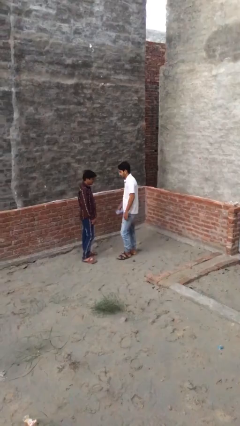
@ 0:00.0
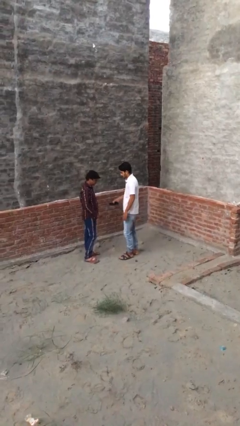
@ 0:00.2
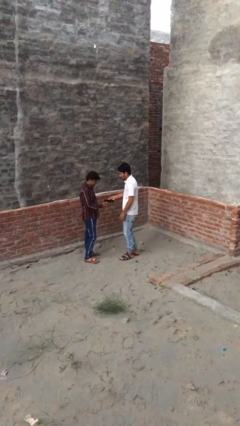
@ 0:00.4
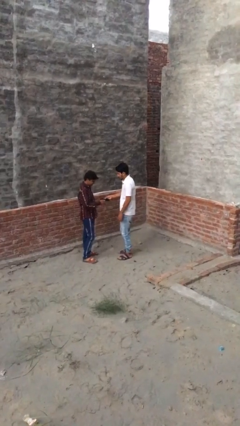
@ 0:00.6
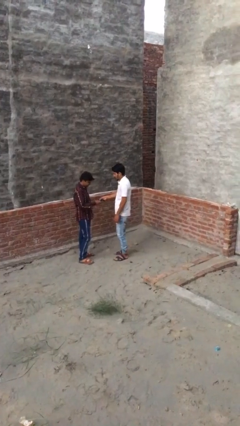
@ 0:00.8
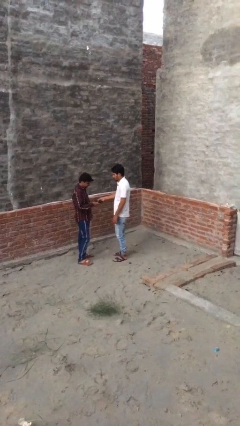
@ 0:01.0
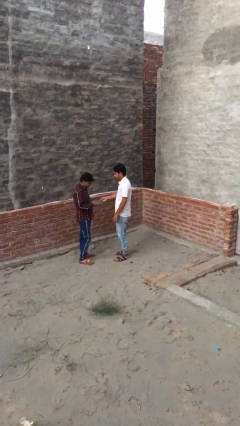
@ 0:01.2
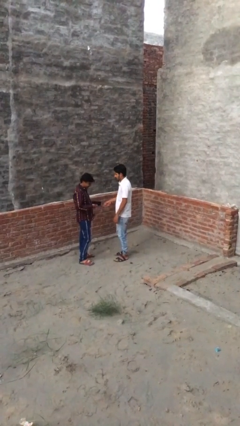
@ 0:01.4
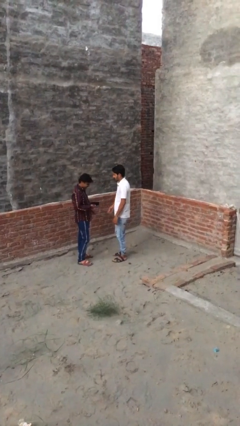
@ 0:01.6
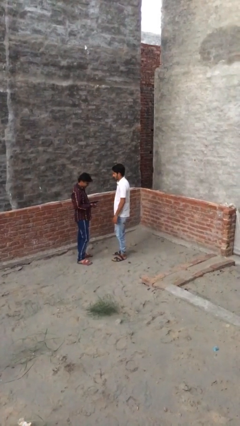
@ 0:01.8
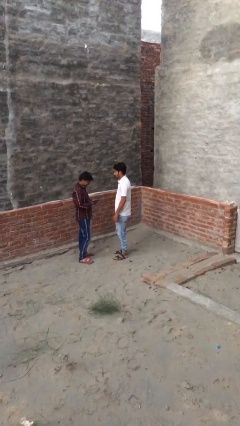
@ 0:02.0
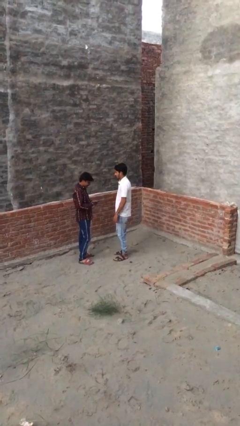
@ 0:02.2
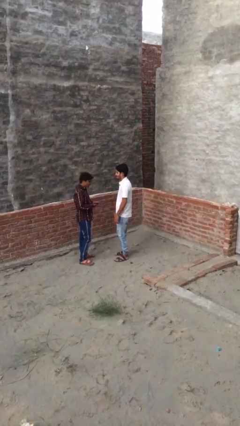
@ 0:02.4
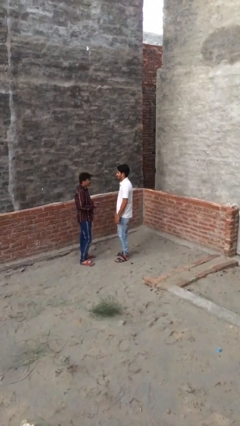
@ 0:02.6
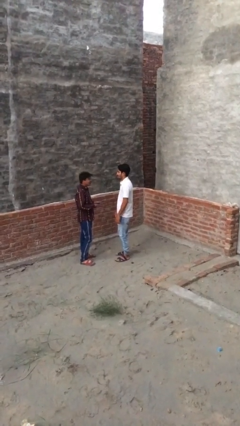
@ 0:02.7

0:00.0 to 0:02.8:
person transfers object to person

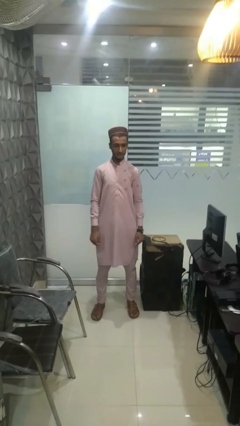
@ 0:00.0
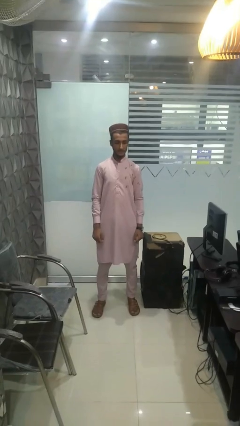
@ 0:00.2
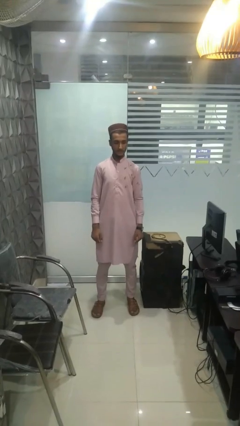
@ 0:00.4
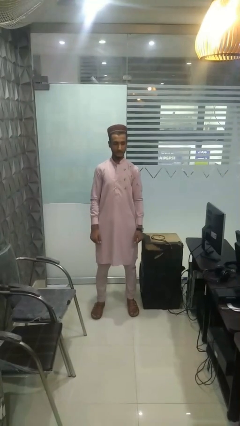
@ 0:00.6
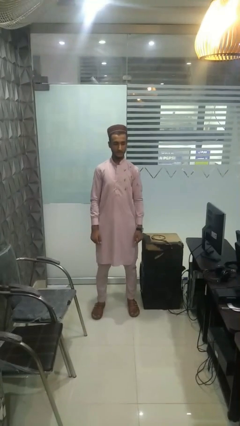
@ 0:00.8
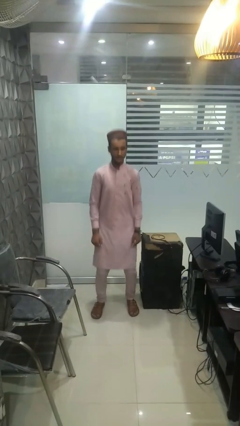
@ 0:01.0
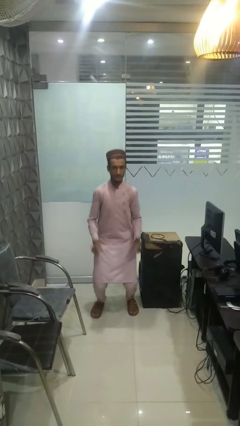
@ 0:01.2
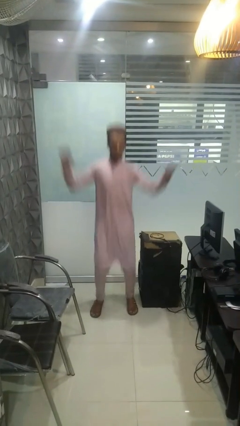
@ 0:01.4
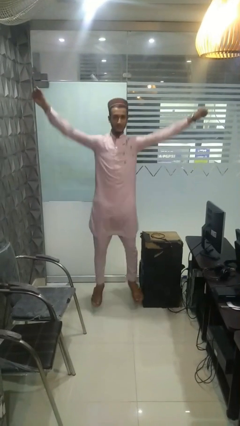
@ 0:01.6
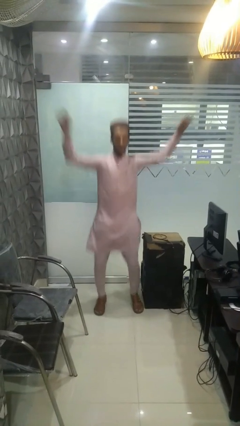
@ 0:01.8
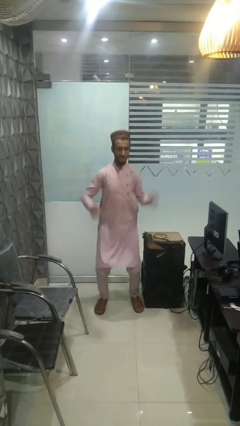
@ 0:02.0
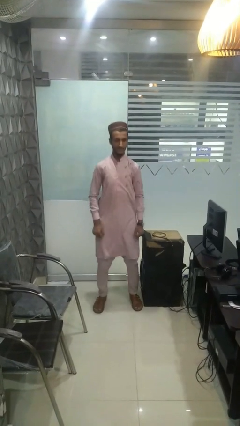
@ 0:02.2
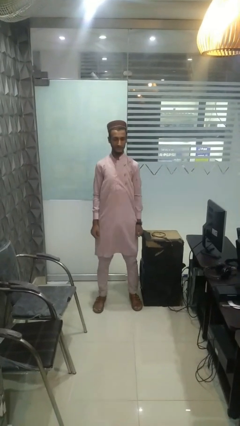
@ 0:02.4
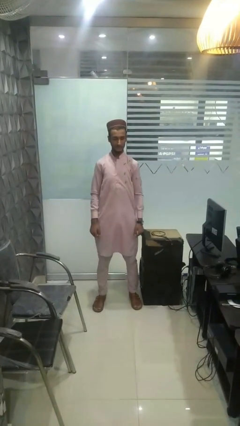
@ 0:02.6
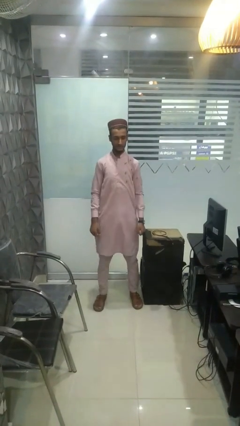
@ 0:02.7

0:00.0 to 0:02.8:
person exercises with jumping jacks

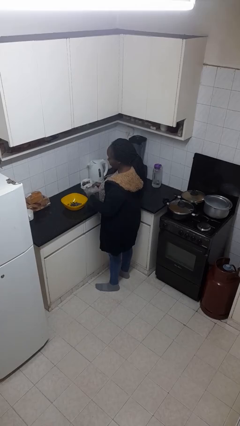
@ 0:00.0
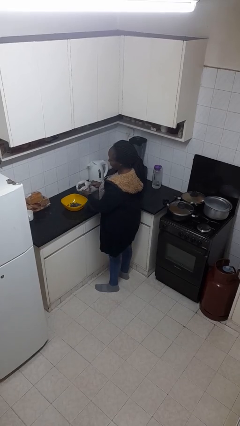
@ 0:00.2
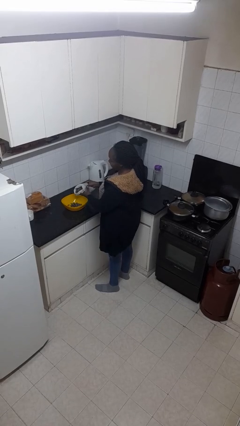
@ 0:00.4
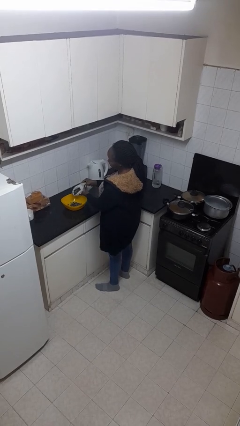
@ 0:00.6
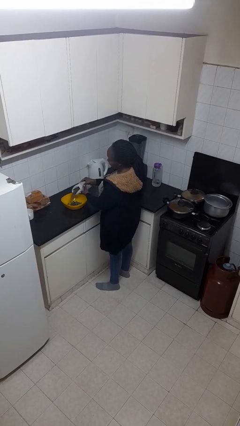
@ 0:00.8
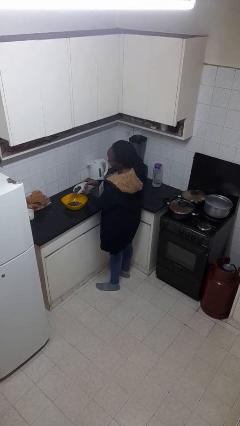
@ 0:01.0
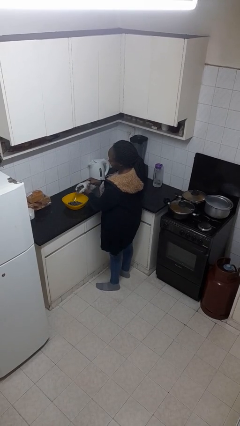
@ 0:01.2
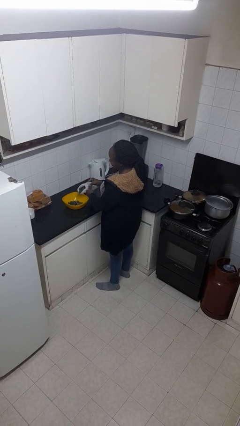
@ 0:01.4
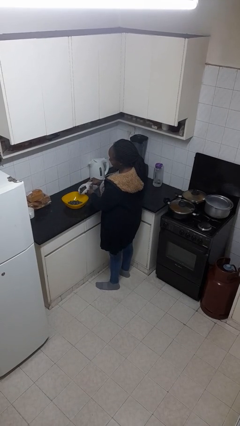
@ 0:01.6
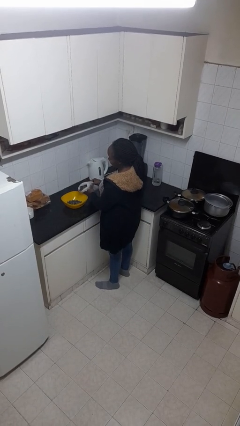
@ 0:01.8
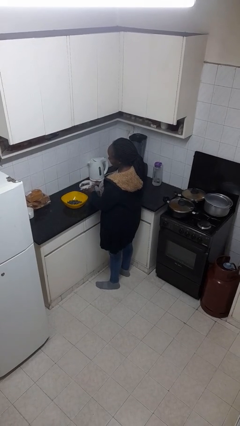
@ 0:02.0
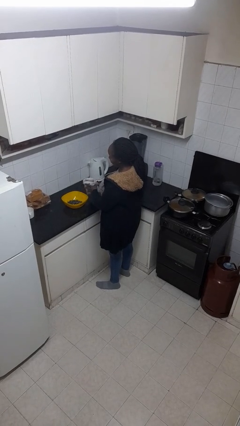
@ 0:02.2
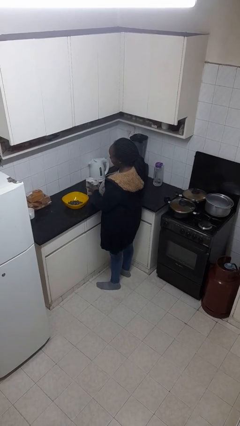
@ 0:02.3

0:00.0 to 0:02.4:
person pours into bowl

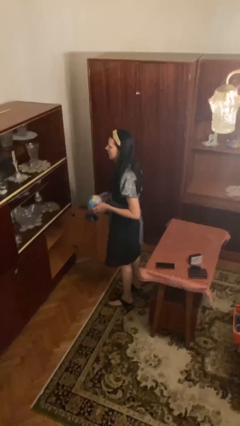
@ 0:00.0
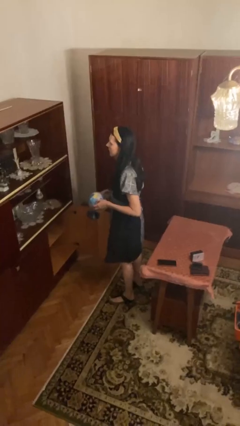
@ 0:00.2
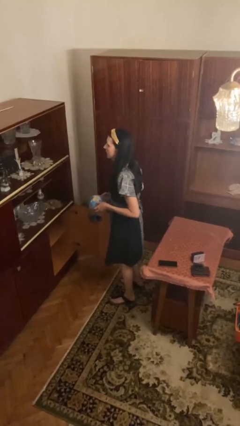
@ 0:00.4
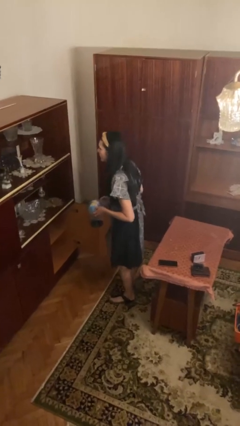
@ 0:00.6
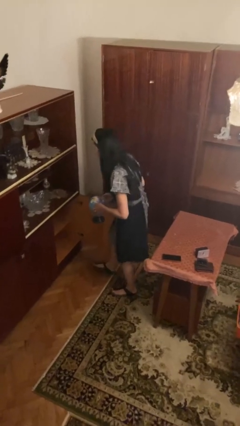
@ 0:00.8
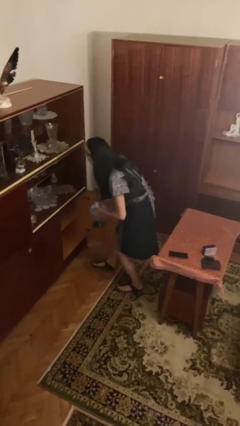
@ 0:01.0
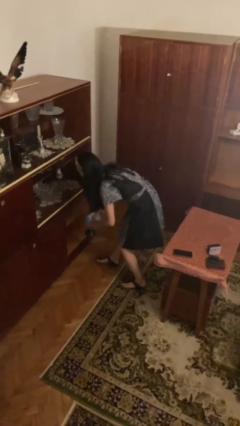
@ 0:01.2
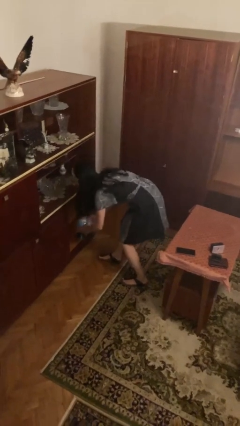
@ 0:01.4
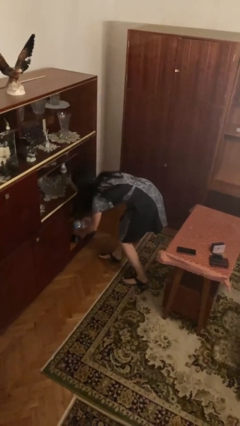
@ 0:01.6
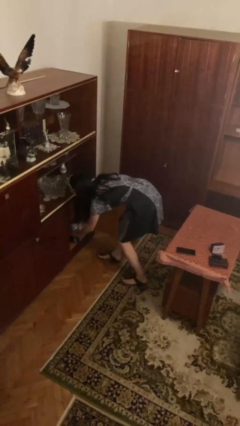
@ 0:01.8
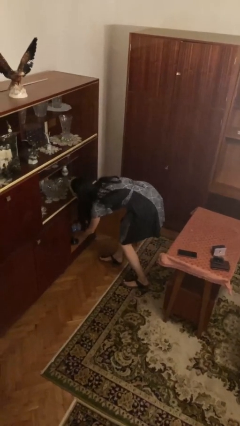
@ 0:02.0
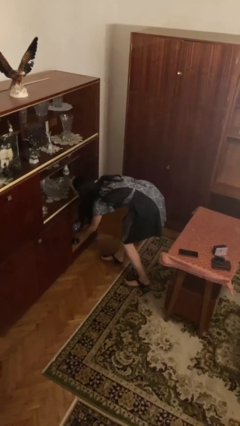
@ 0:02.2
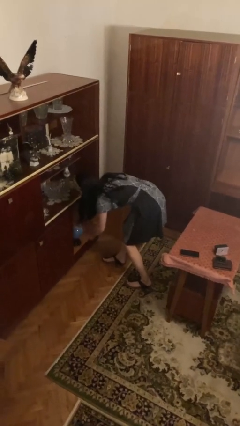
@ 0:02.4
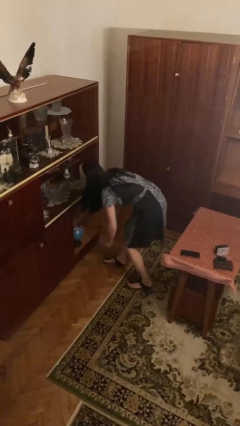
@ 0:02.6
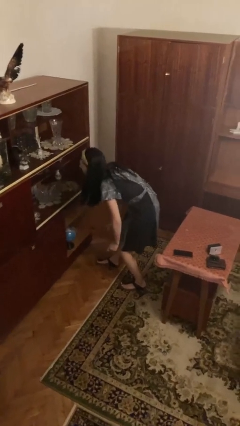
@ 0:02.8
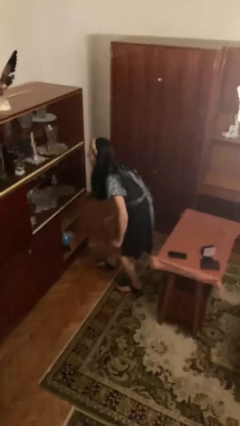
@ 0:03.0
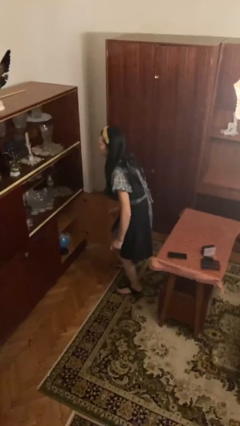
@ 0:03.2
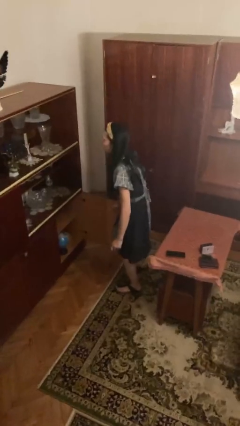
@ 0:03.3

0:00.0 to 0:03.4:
person puts down object into cabinet

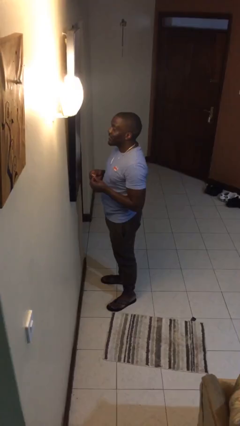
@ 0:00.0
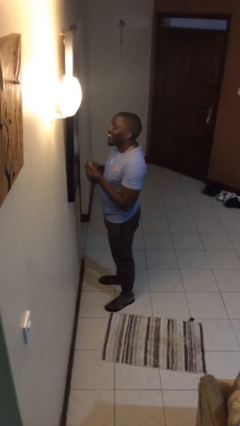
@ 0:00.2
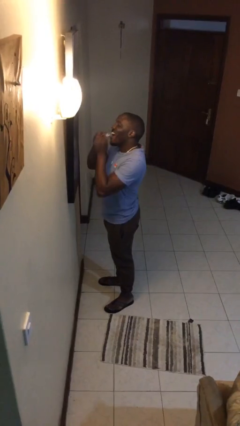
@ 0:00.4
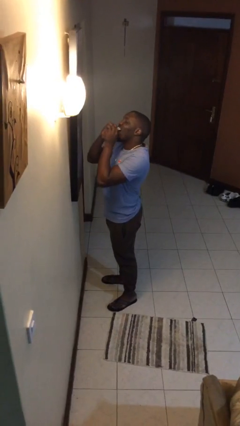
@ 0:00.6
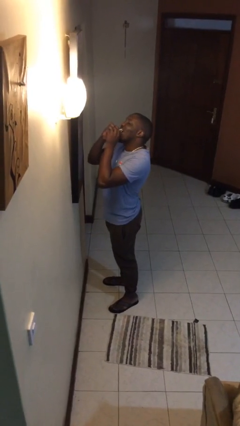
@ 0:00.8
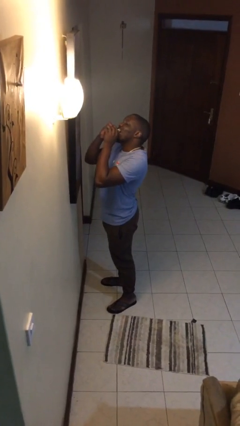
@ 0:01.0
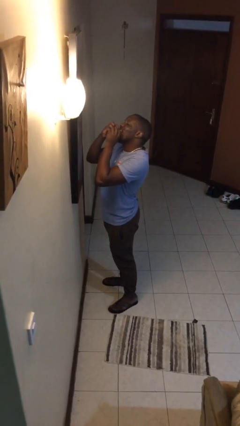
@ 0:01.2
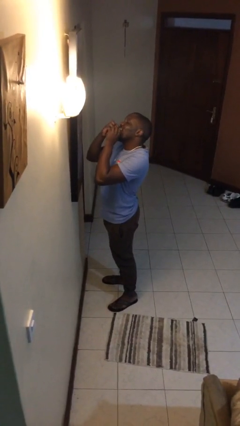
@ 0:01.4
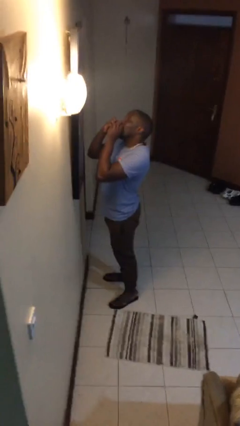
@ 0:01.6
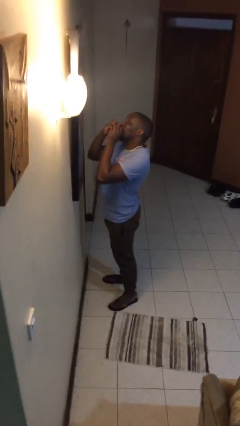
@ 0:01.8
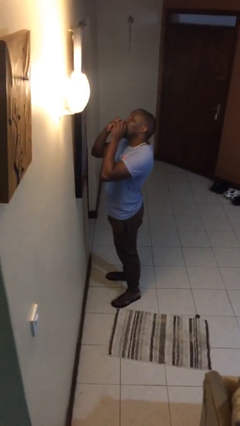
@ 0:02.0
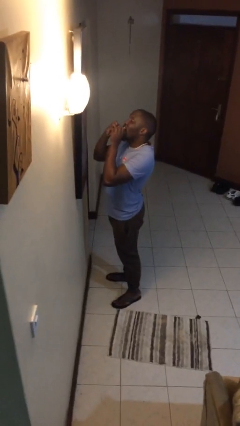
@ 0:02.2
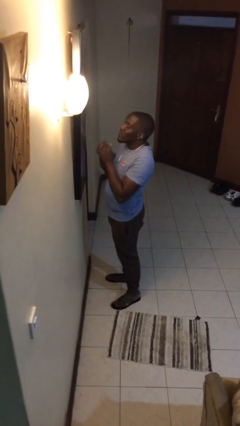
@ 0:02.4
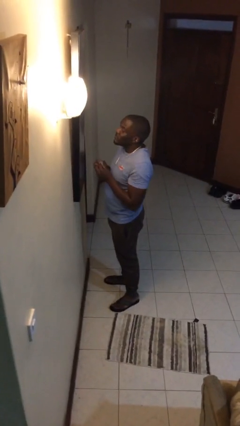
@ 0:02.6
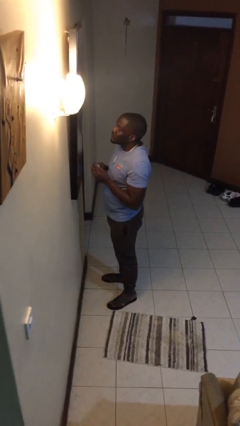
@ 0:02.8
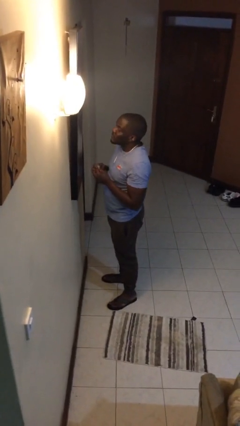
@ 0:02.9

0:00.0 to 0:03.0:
person flosses

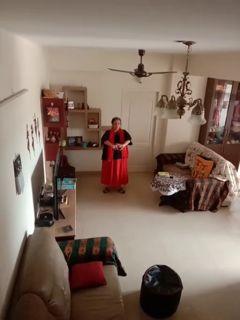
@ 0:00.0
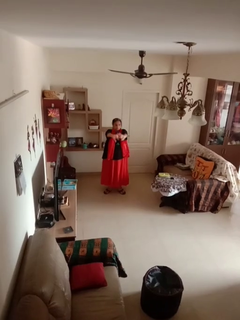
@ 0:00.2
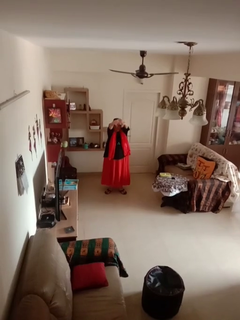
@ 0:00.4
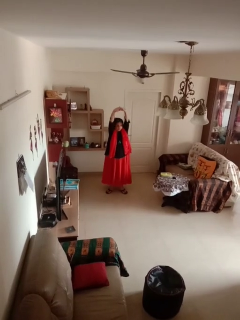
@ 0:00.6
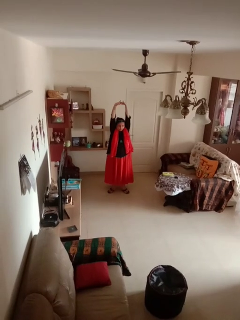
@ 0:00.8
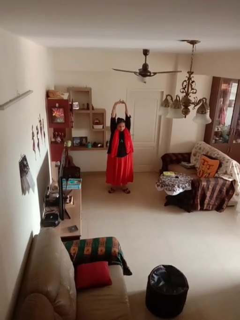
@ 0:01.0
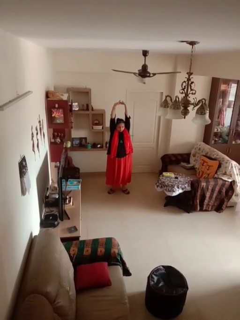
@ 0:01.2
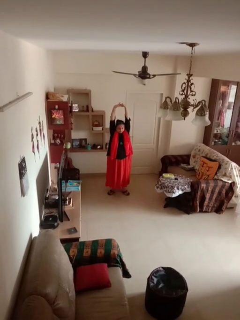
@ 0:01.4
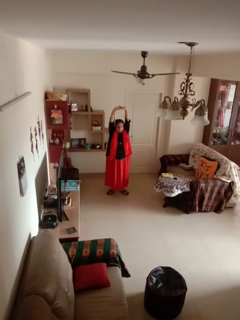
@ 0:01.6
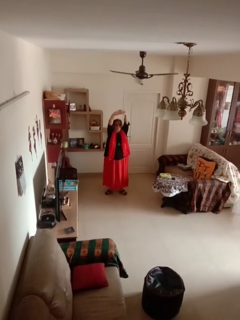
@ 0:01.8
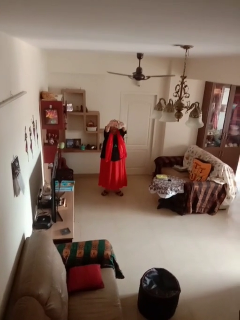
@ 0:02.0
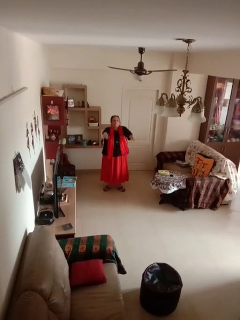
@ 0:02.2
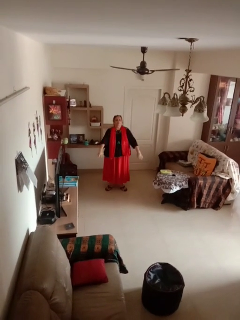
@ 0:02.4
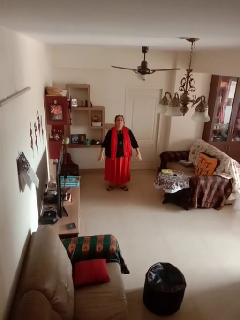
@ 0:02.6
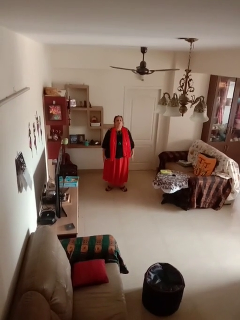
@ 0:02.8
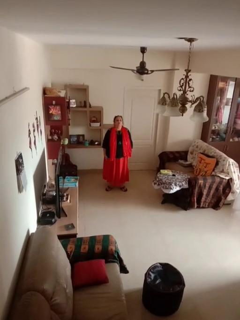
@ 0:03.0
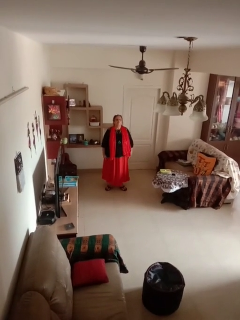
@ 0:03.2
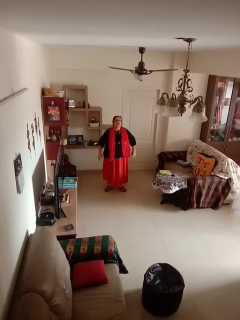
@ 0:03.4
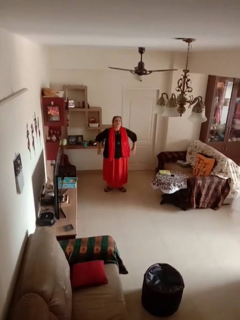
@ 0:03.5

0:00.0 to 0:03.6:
person stretches arms over head
